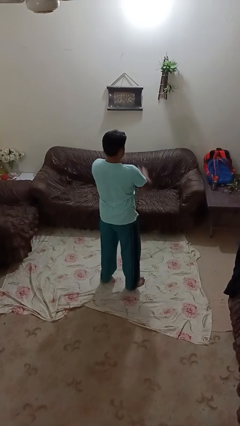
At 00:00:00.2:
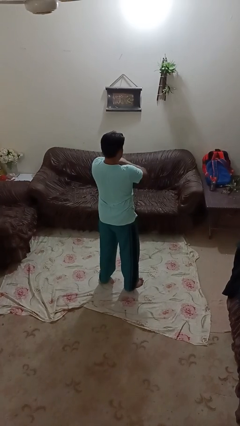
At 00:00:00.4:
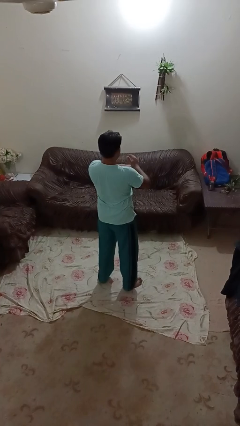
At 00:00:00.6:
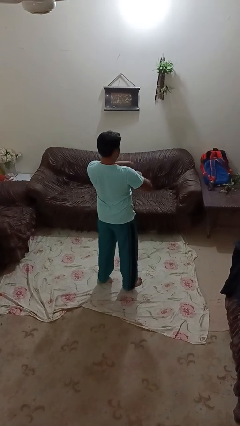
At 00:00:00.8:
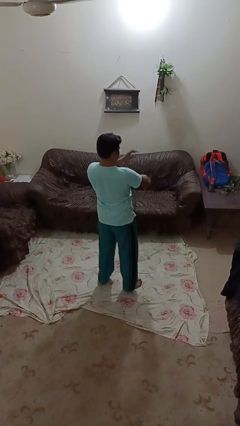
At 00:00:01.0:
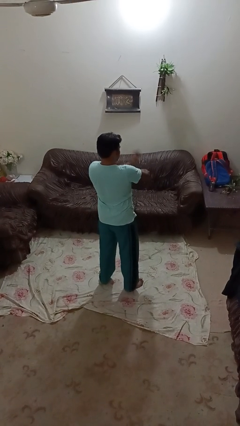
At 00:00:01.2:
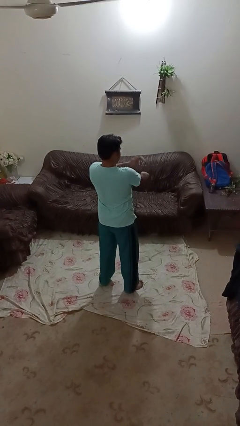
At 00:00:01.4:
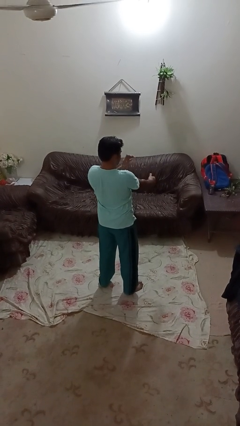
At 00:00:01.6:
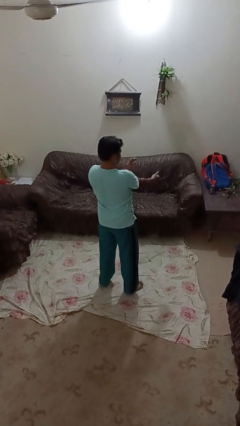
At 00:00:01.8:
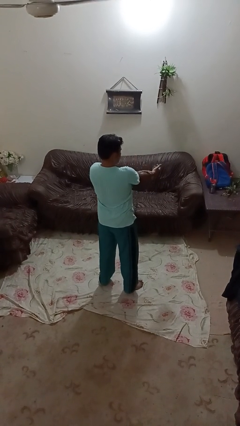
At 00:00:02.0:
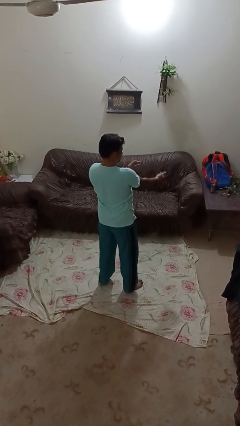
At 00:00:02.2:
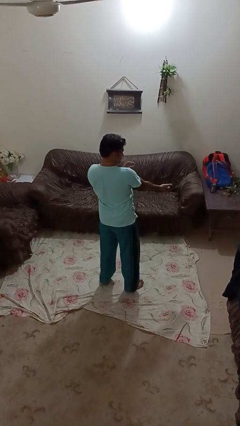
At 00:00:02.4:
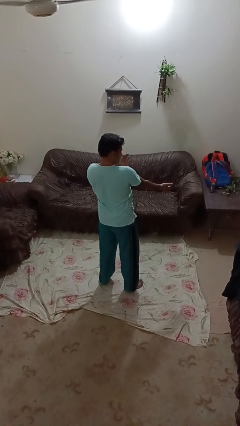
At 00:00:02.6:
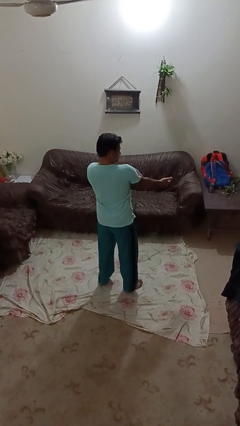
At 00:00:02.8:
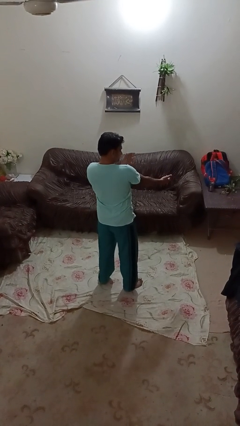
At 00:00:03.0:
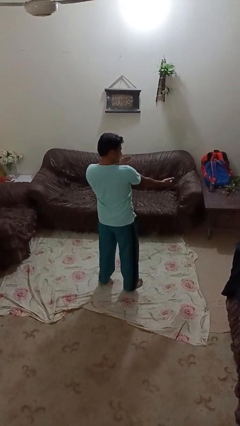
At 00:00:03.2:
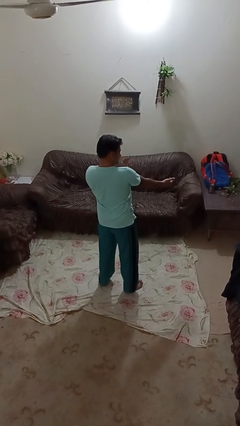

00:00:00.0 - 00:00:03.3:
person swats bug

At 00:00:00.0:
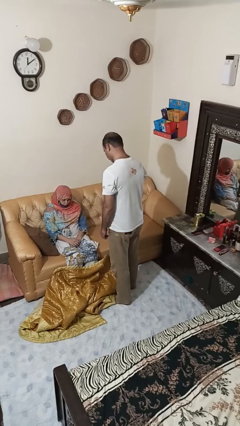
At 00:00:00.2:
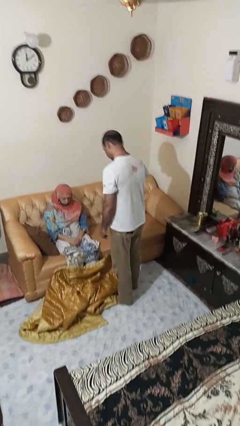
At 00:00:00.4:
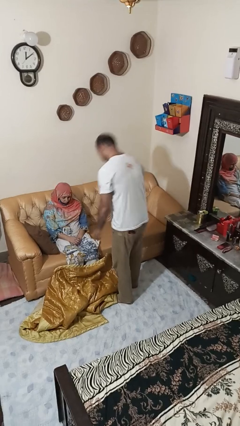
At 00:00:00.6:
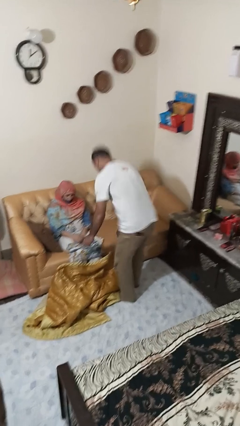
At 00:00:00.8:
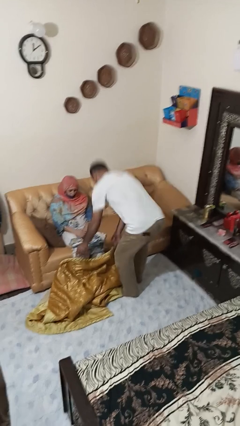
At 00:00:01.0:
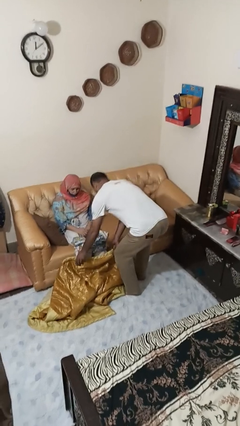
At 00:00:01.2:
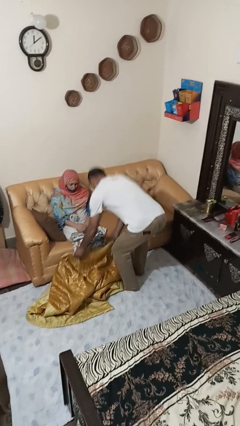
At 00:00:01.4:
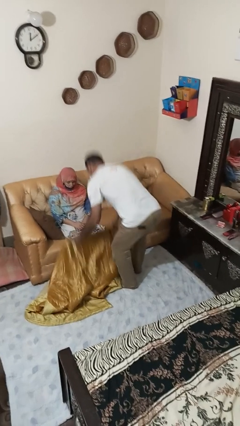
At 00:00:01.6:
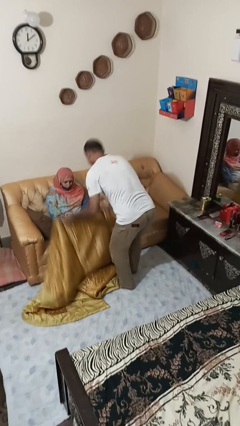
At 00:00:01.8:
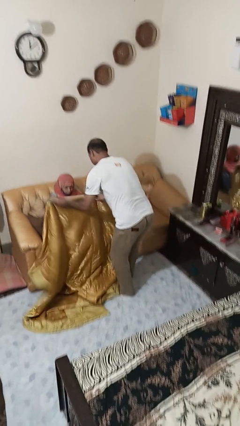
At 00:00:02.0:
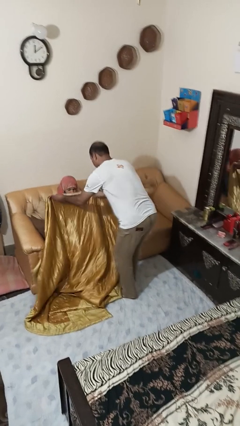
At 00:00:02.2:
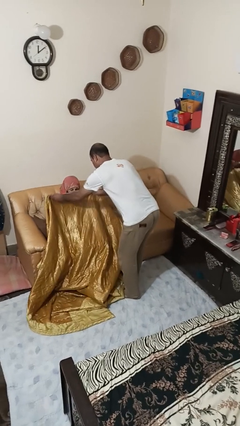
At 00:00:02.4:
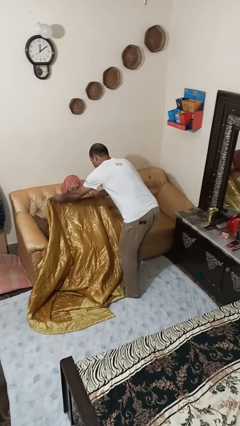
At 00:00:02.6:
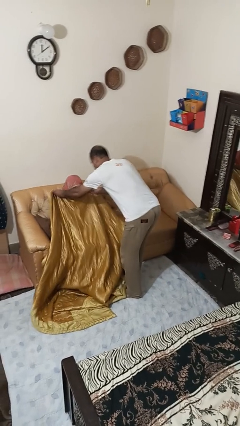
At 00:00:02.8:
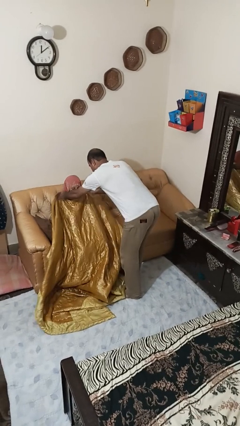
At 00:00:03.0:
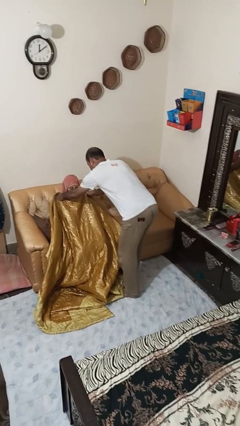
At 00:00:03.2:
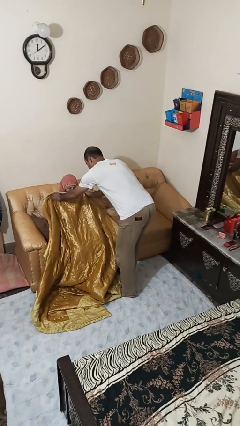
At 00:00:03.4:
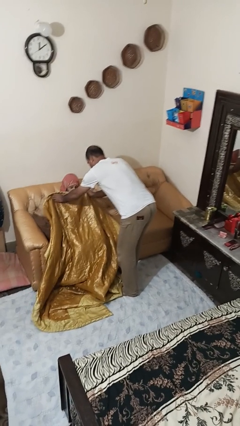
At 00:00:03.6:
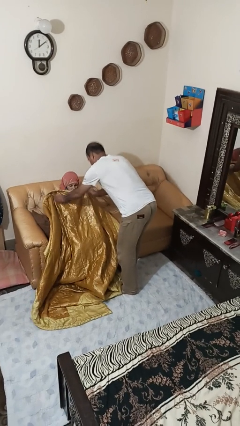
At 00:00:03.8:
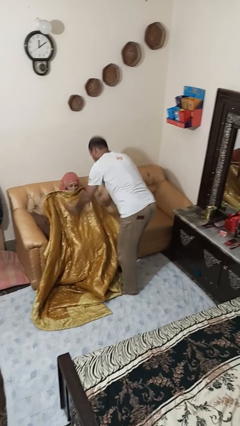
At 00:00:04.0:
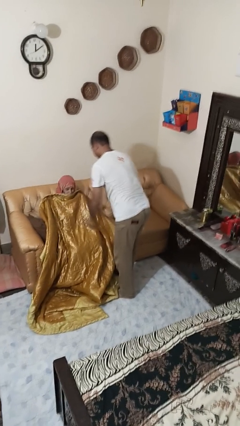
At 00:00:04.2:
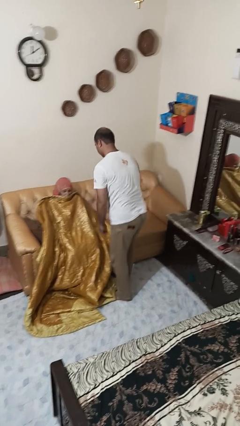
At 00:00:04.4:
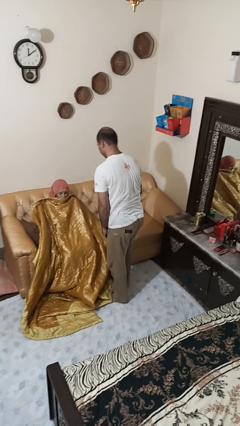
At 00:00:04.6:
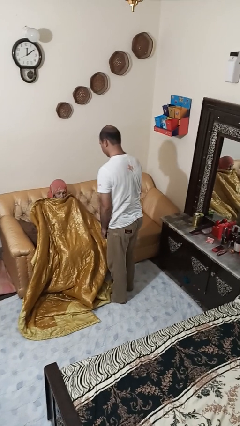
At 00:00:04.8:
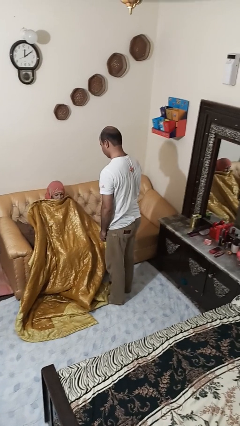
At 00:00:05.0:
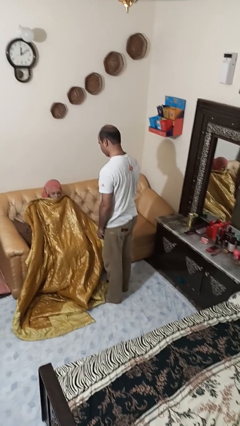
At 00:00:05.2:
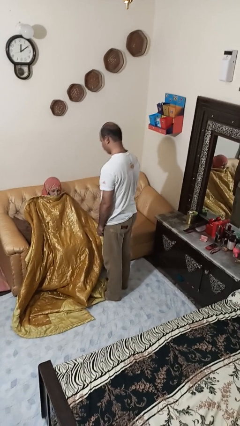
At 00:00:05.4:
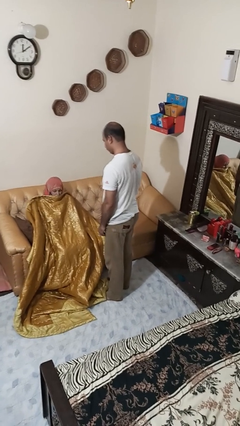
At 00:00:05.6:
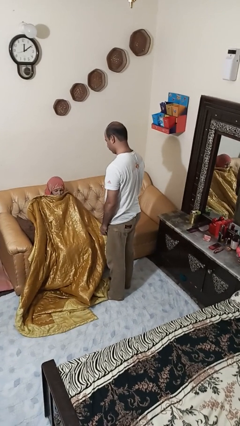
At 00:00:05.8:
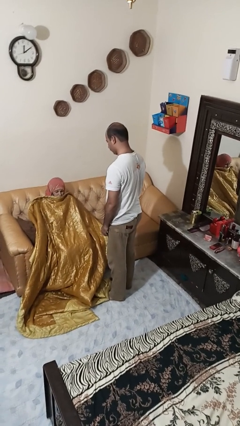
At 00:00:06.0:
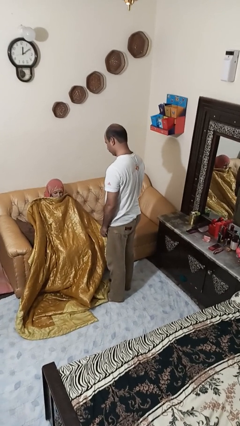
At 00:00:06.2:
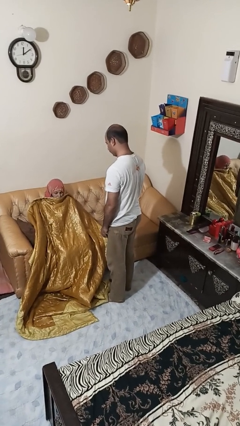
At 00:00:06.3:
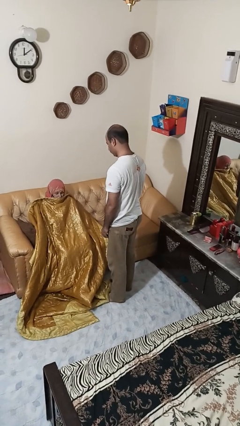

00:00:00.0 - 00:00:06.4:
person covers friend with blanket

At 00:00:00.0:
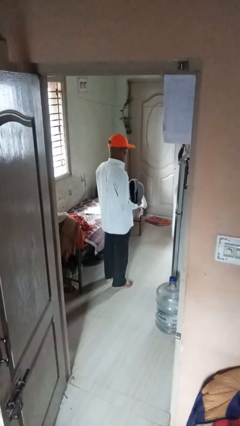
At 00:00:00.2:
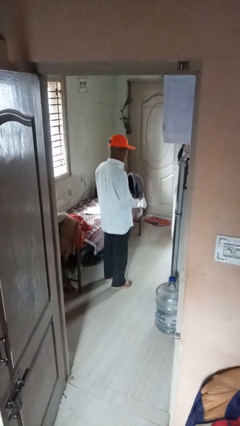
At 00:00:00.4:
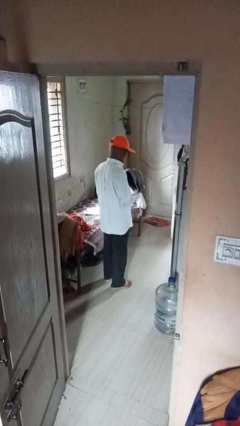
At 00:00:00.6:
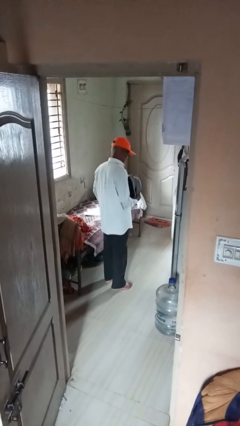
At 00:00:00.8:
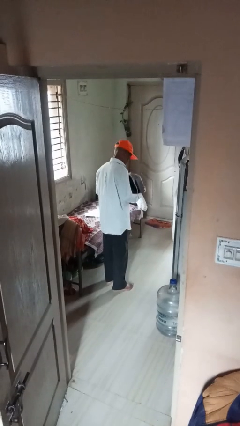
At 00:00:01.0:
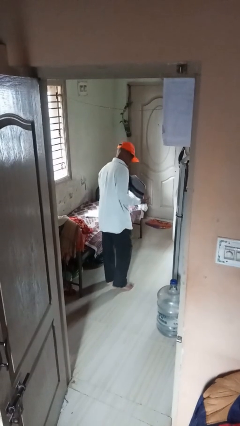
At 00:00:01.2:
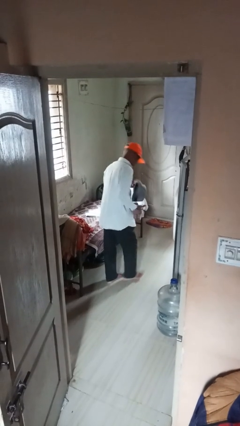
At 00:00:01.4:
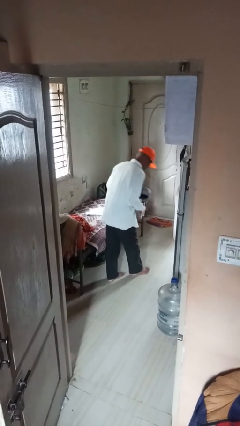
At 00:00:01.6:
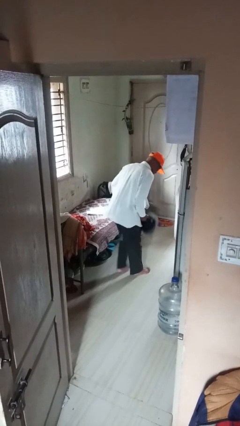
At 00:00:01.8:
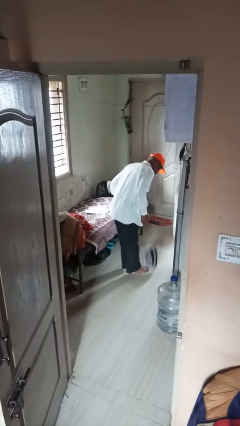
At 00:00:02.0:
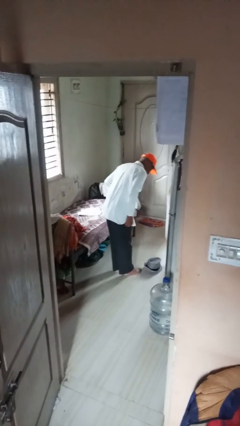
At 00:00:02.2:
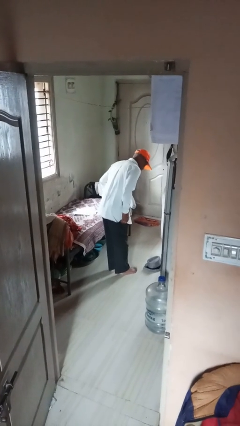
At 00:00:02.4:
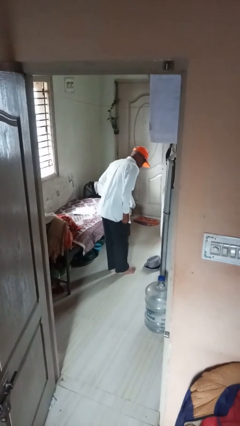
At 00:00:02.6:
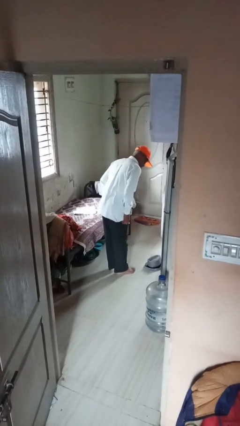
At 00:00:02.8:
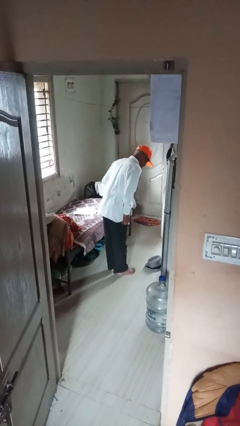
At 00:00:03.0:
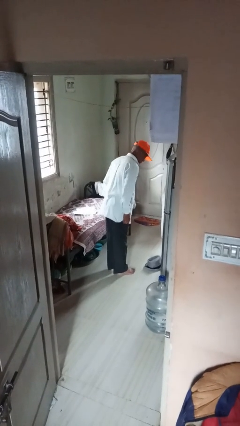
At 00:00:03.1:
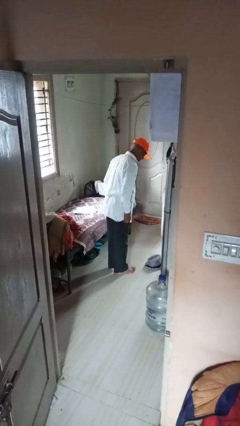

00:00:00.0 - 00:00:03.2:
person drops object

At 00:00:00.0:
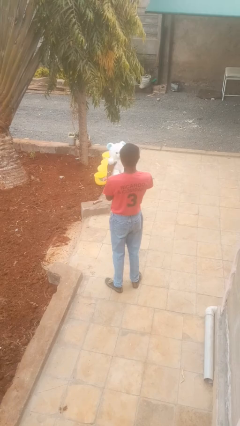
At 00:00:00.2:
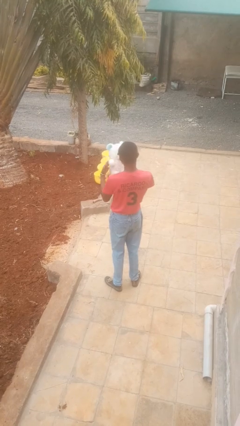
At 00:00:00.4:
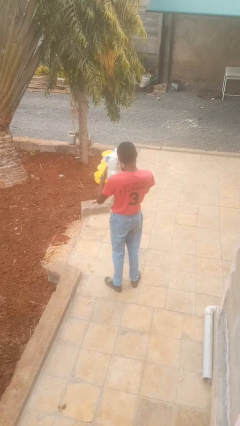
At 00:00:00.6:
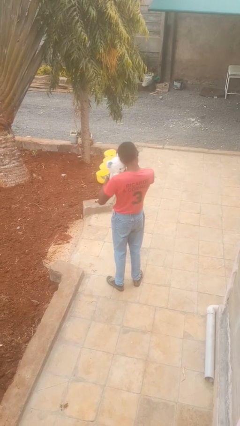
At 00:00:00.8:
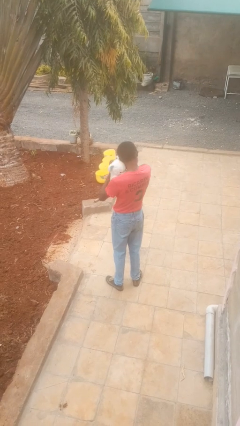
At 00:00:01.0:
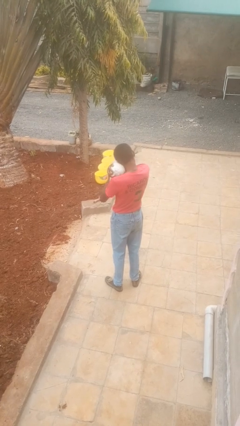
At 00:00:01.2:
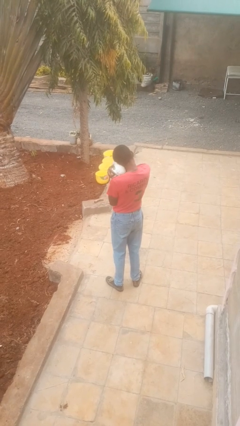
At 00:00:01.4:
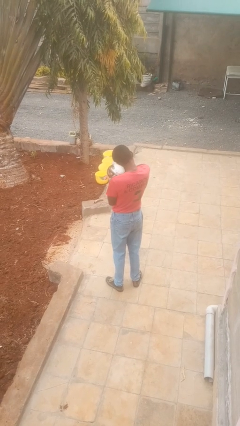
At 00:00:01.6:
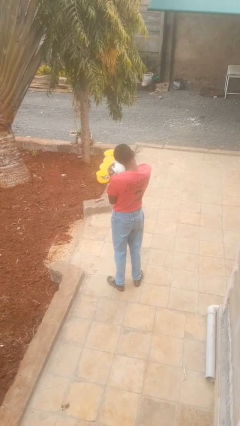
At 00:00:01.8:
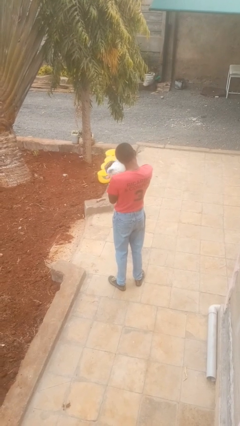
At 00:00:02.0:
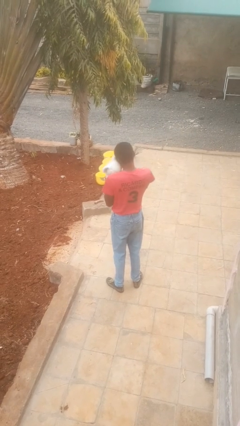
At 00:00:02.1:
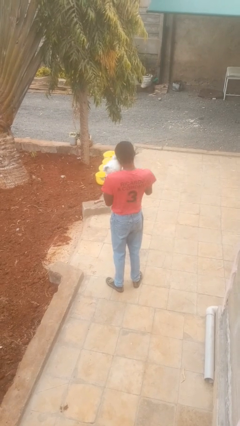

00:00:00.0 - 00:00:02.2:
person hugs stuffed animal

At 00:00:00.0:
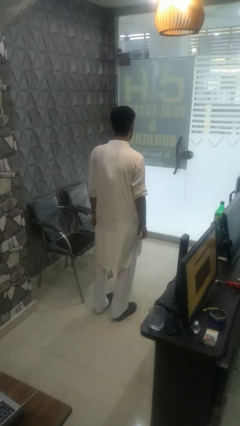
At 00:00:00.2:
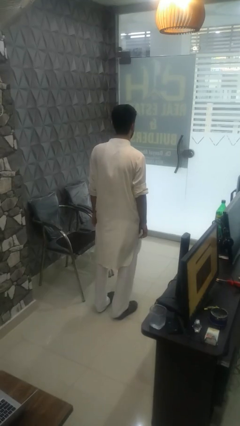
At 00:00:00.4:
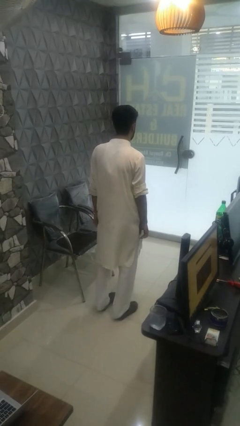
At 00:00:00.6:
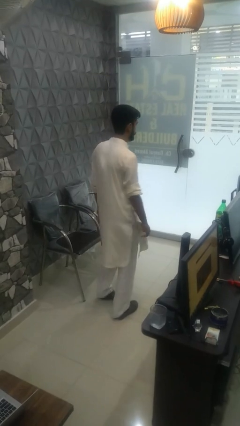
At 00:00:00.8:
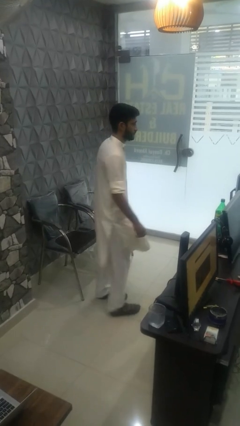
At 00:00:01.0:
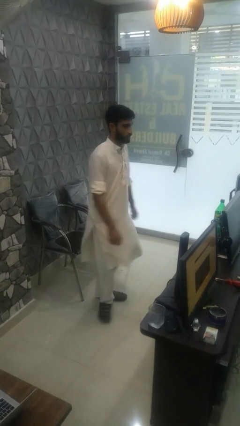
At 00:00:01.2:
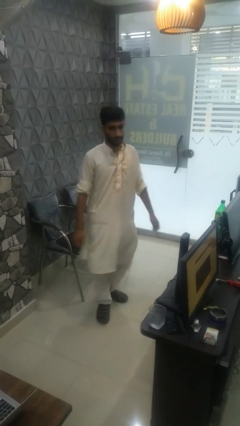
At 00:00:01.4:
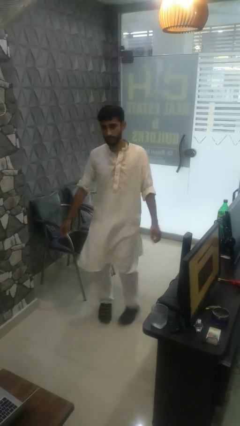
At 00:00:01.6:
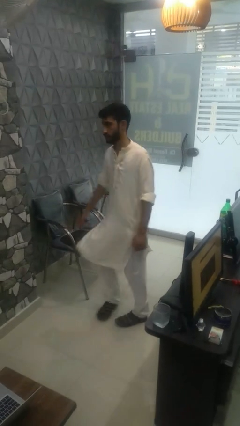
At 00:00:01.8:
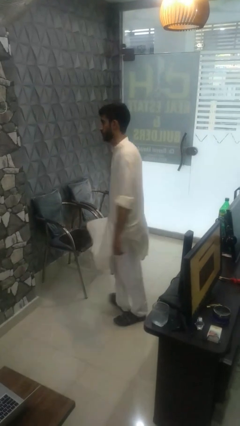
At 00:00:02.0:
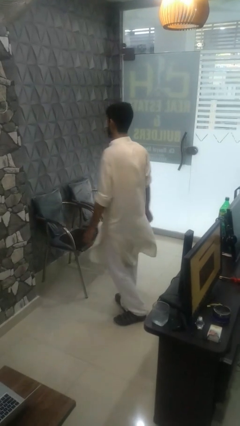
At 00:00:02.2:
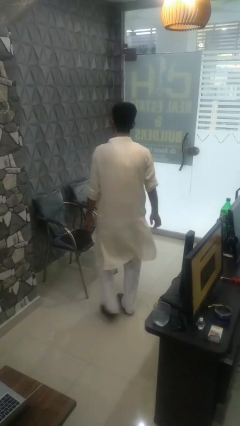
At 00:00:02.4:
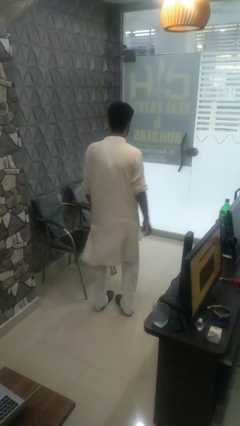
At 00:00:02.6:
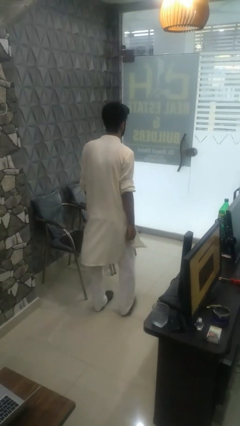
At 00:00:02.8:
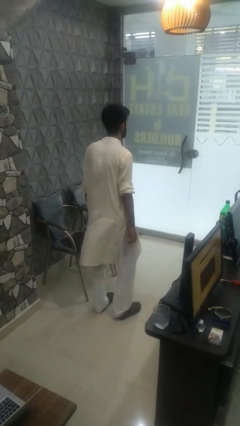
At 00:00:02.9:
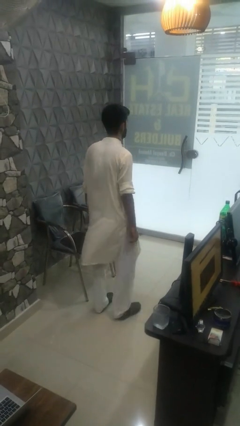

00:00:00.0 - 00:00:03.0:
person twirls
